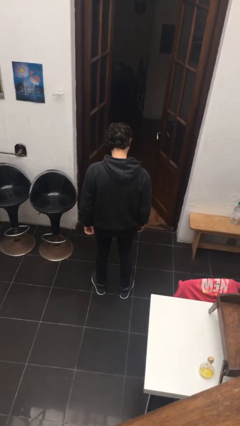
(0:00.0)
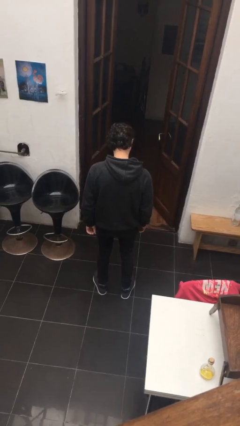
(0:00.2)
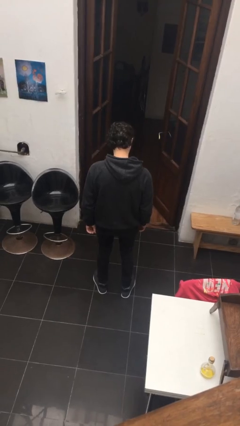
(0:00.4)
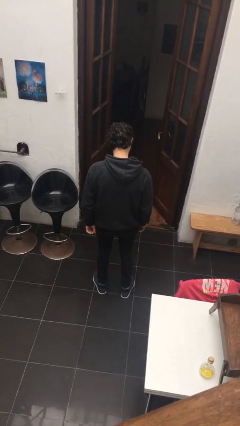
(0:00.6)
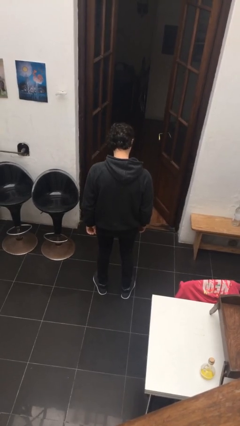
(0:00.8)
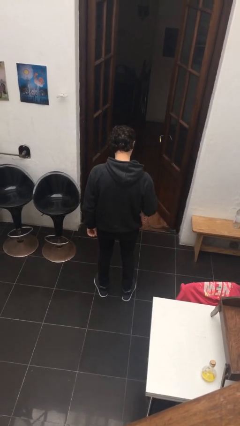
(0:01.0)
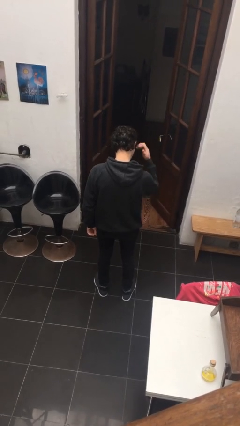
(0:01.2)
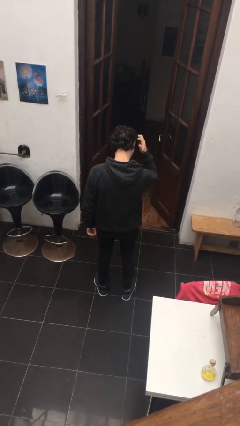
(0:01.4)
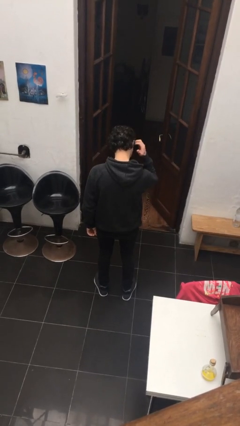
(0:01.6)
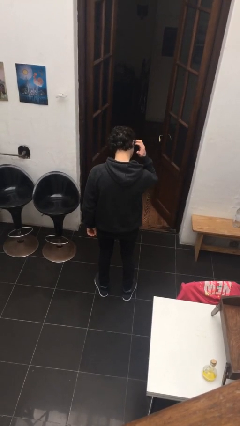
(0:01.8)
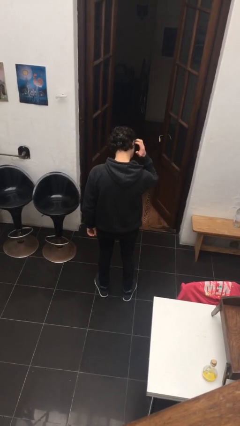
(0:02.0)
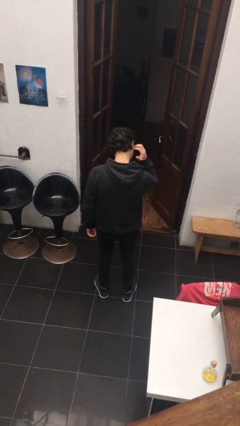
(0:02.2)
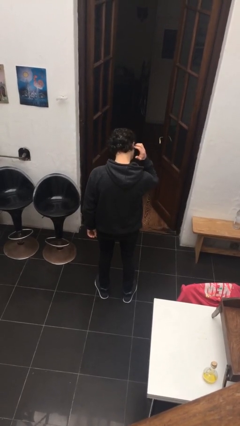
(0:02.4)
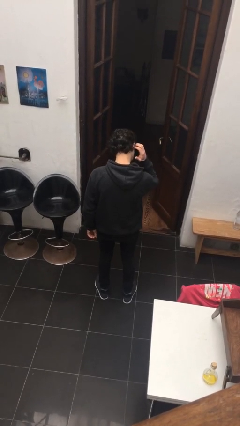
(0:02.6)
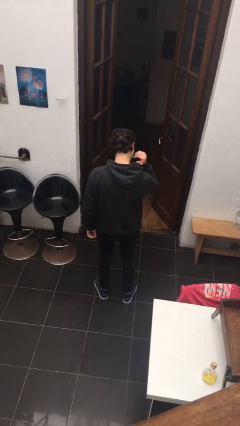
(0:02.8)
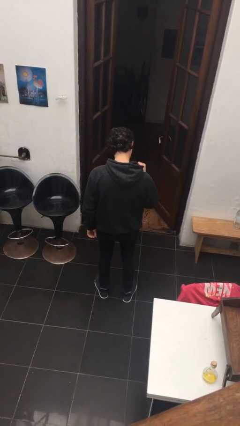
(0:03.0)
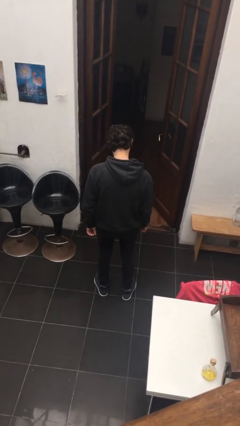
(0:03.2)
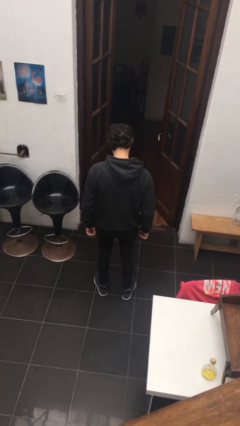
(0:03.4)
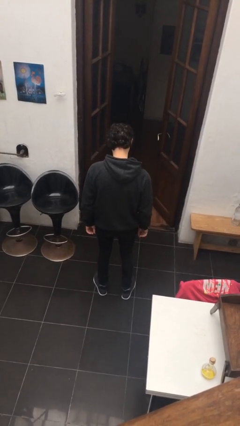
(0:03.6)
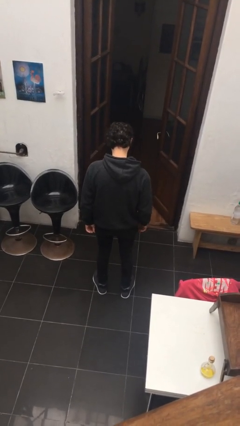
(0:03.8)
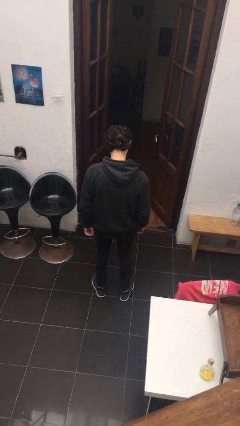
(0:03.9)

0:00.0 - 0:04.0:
person scratches face

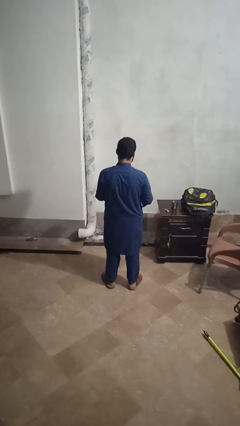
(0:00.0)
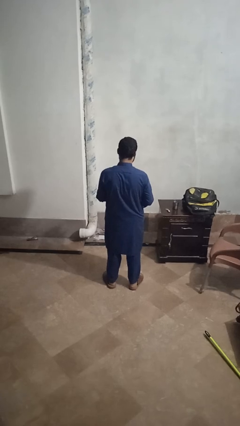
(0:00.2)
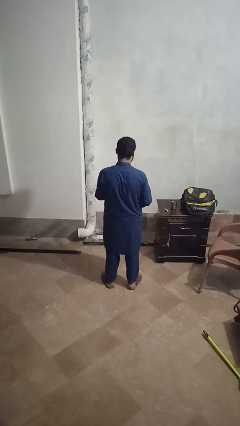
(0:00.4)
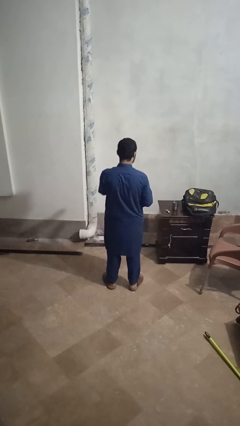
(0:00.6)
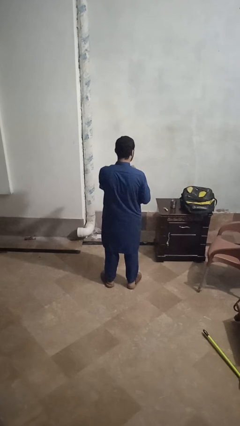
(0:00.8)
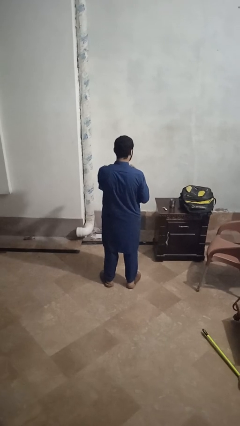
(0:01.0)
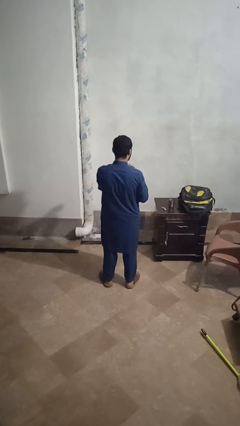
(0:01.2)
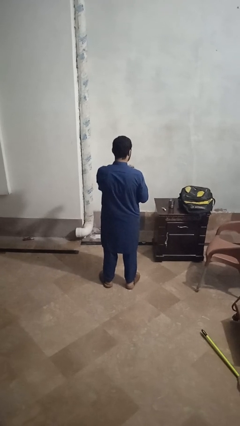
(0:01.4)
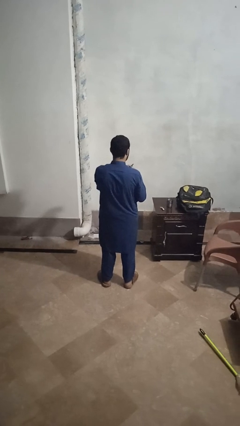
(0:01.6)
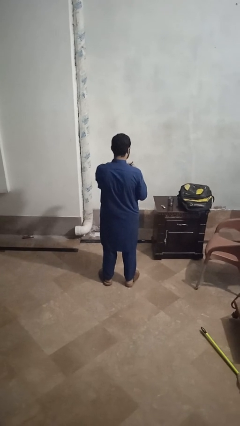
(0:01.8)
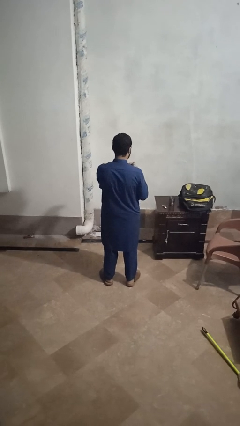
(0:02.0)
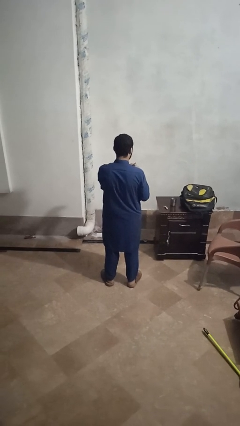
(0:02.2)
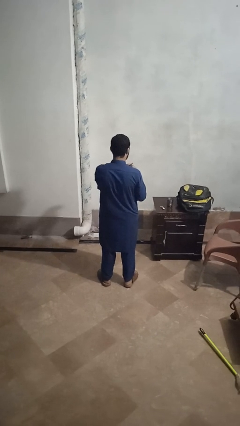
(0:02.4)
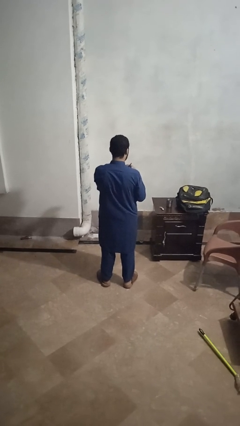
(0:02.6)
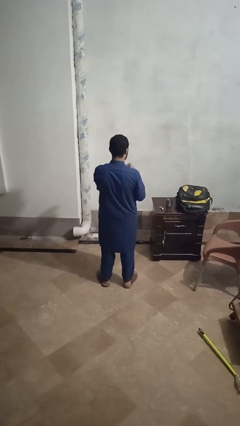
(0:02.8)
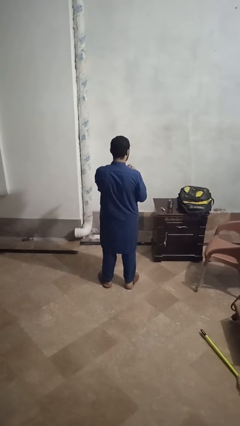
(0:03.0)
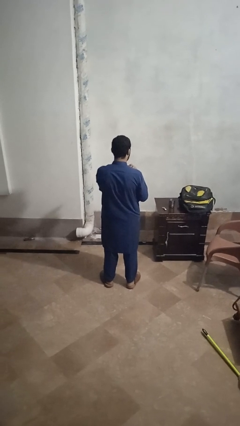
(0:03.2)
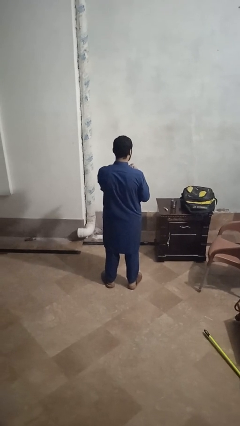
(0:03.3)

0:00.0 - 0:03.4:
person files fingernails

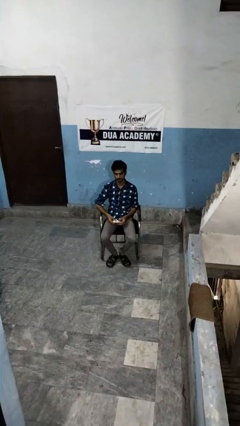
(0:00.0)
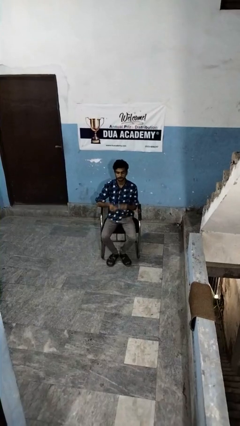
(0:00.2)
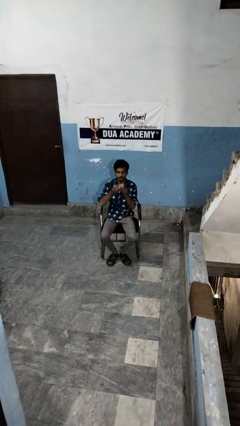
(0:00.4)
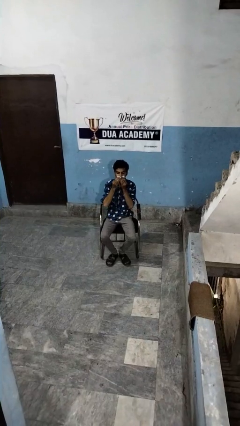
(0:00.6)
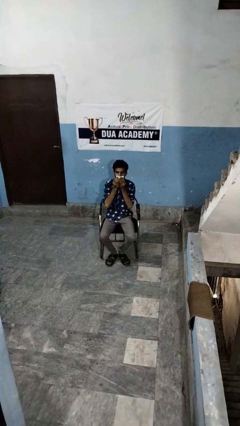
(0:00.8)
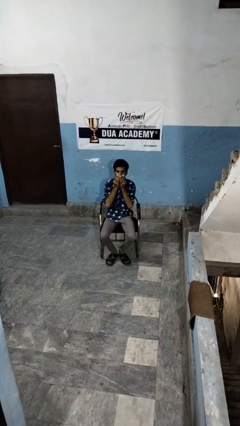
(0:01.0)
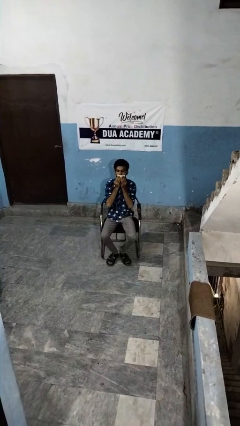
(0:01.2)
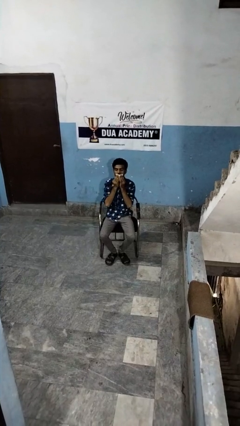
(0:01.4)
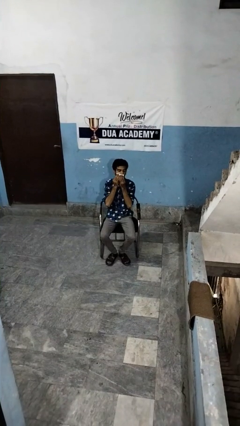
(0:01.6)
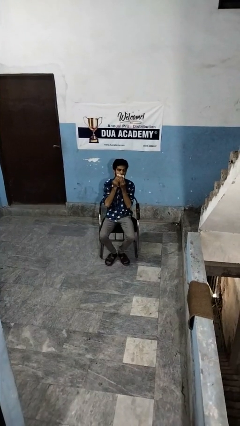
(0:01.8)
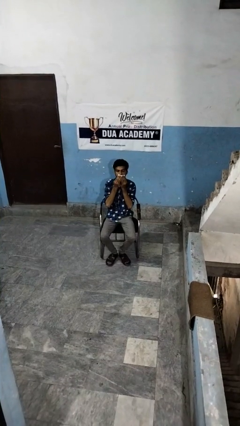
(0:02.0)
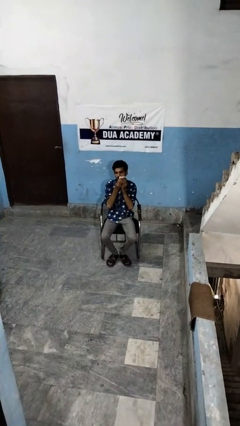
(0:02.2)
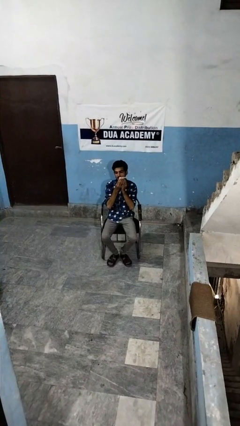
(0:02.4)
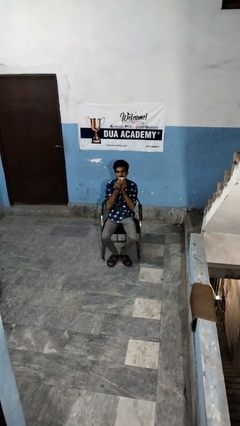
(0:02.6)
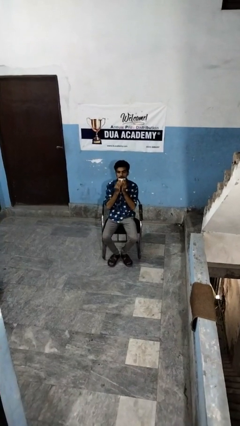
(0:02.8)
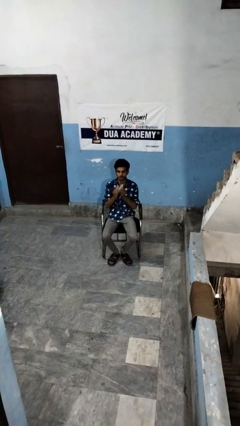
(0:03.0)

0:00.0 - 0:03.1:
person wipes mouth with napkin

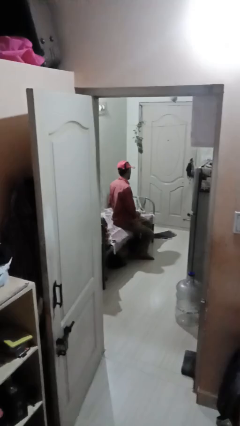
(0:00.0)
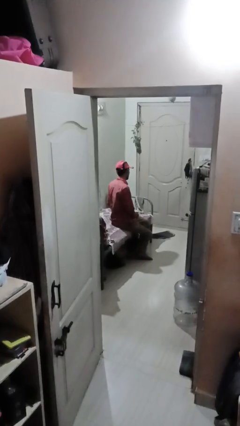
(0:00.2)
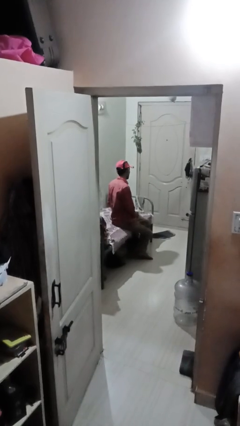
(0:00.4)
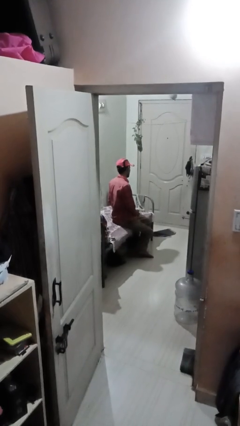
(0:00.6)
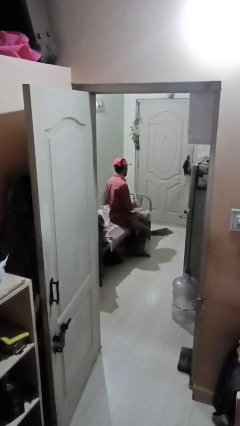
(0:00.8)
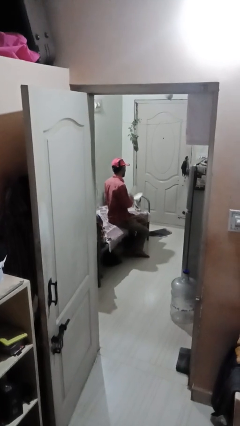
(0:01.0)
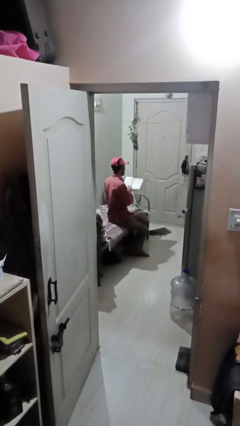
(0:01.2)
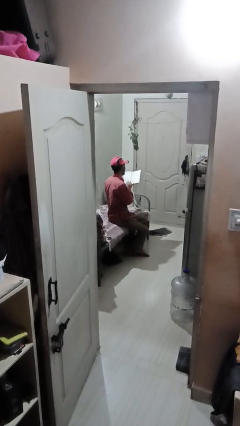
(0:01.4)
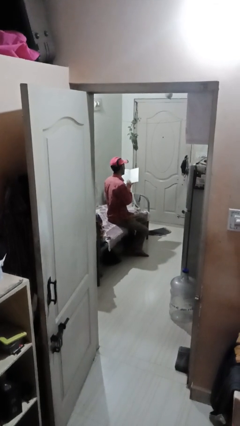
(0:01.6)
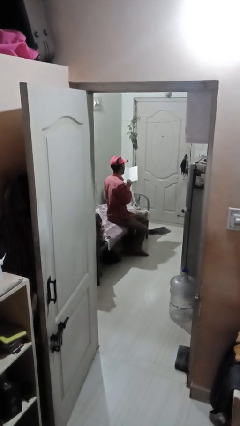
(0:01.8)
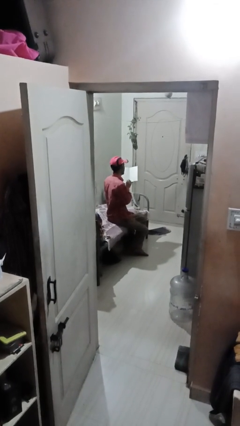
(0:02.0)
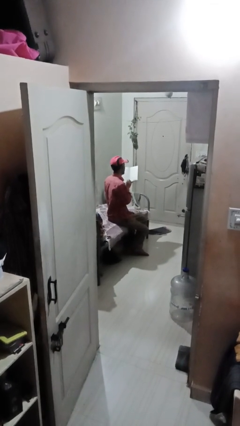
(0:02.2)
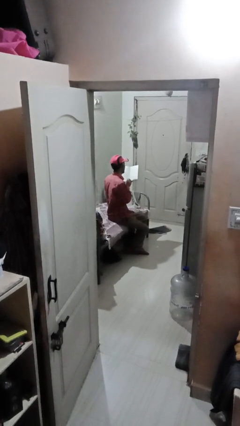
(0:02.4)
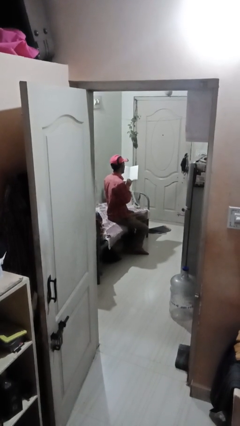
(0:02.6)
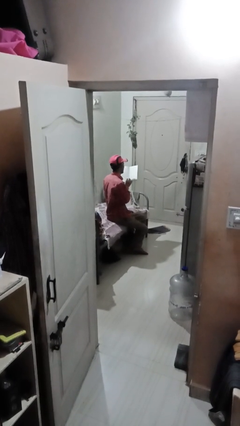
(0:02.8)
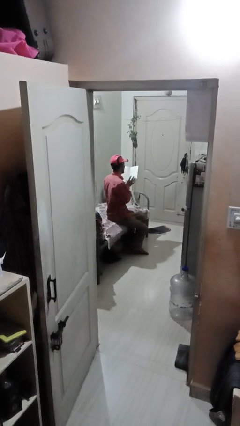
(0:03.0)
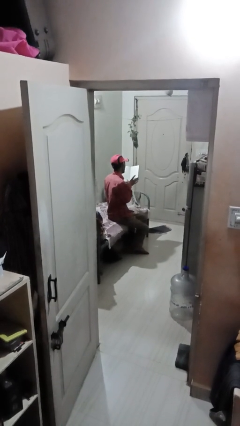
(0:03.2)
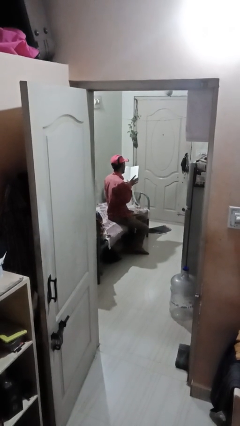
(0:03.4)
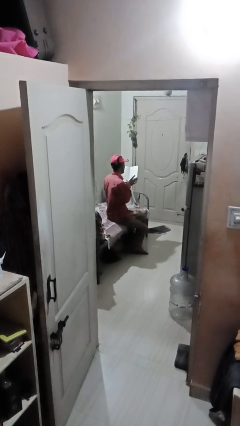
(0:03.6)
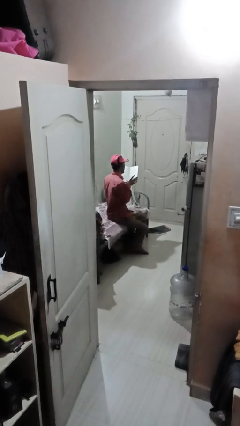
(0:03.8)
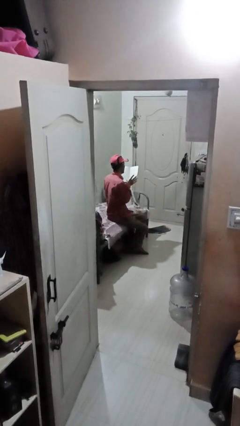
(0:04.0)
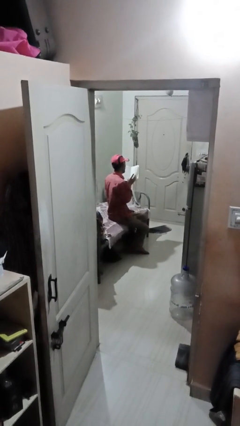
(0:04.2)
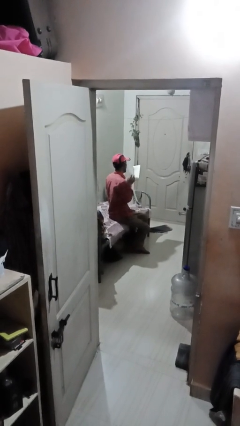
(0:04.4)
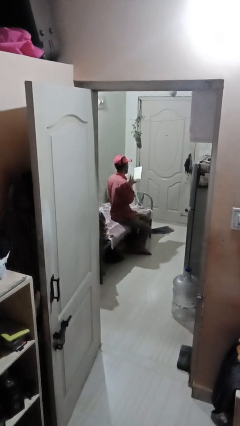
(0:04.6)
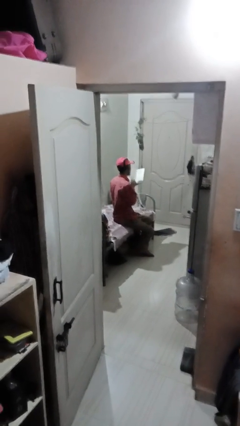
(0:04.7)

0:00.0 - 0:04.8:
person reads book

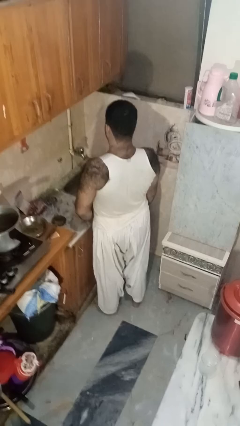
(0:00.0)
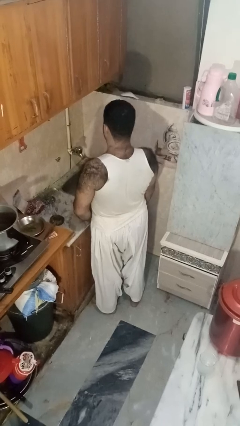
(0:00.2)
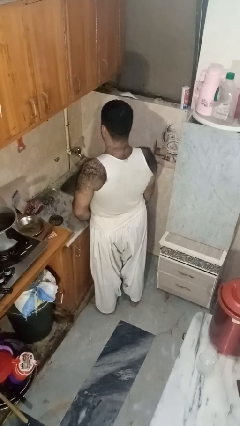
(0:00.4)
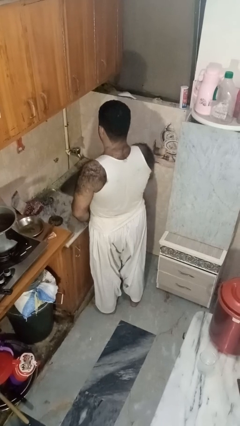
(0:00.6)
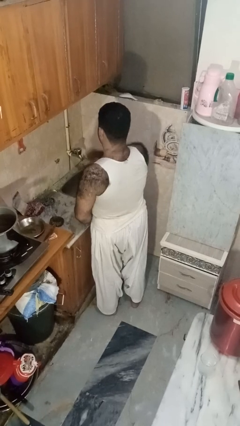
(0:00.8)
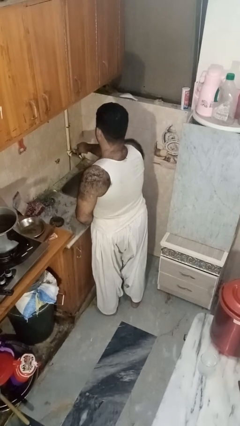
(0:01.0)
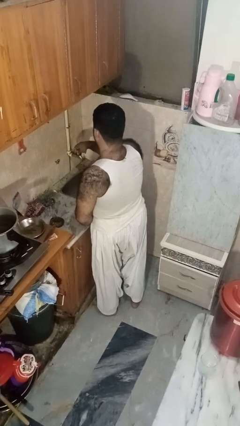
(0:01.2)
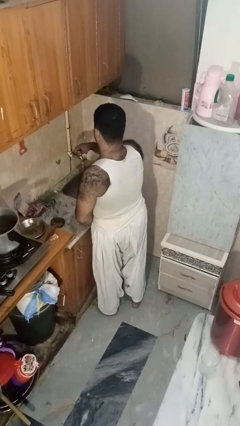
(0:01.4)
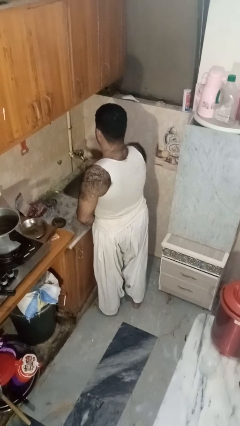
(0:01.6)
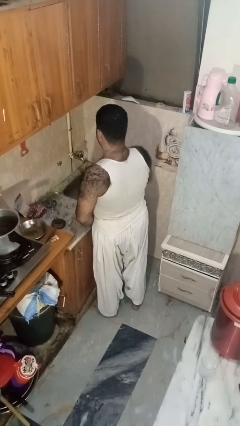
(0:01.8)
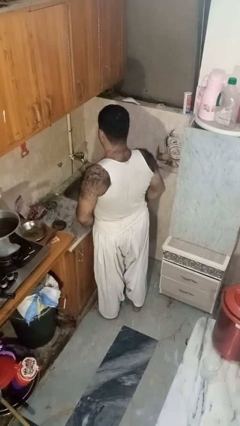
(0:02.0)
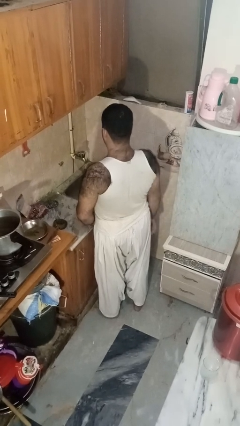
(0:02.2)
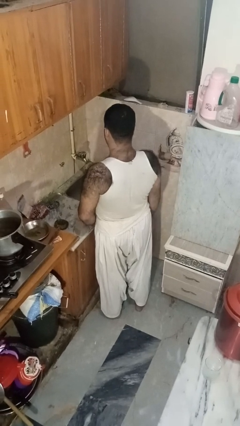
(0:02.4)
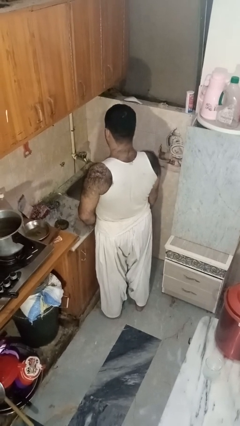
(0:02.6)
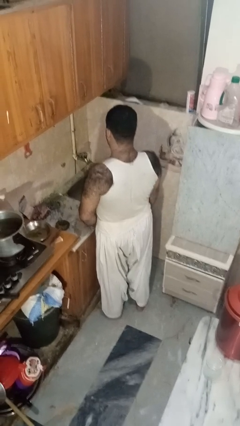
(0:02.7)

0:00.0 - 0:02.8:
person turns on faucet
